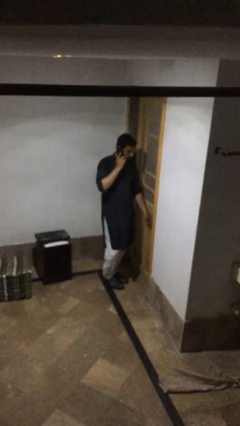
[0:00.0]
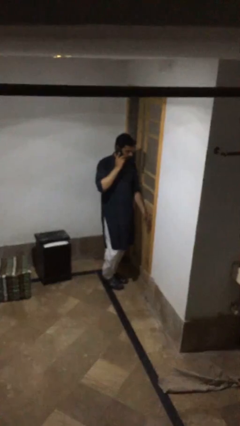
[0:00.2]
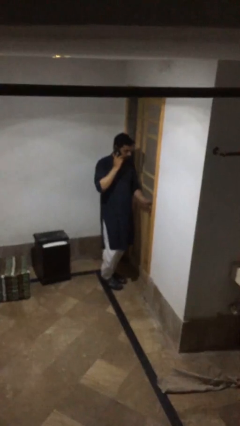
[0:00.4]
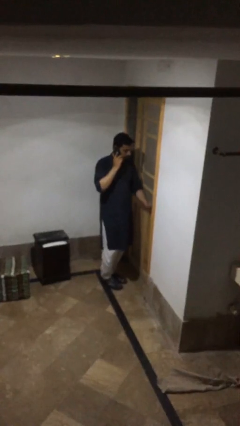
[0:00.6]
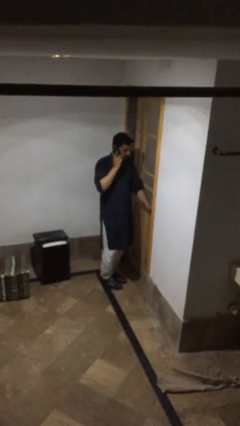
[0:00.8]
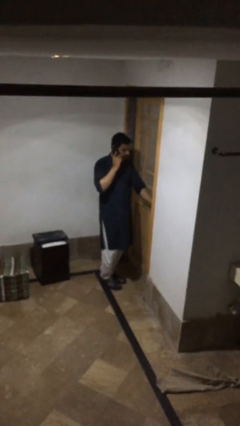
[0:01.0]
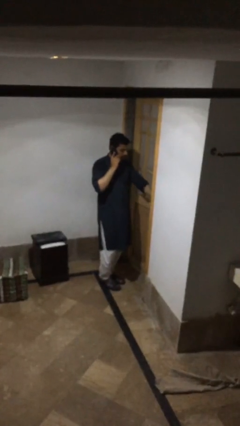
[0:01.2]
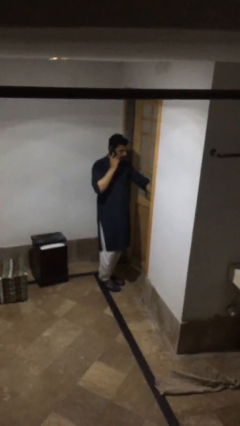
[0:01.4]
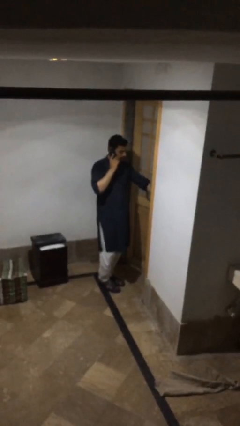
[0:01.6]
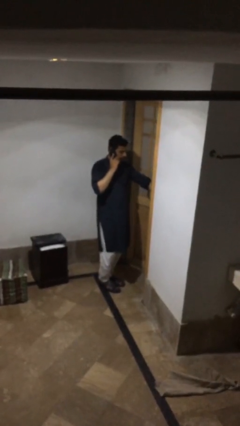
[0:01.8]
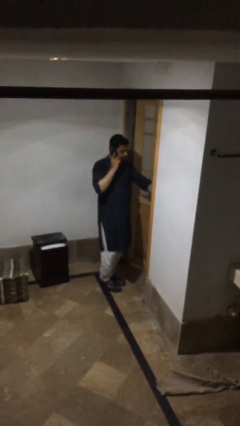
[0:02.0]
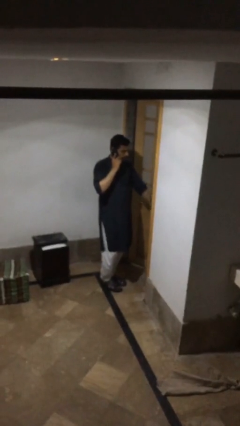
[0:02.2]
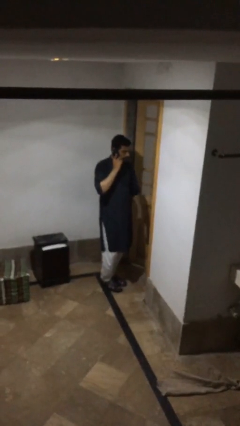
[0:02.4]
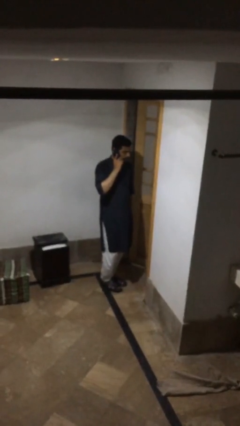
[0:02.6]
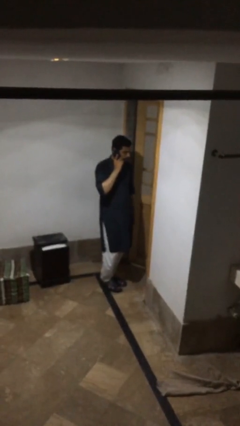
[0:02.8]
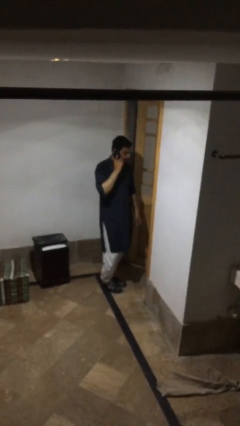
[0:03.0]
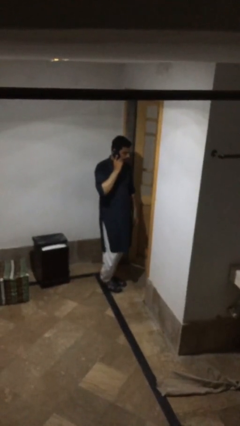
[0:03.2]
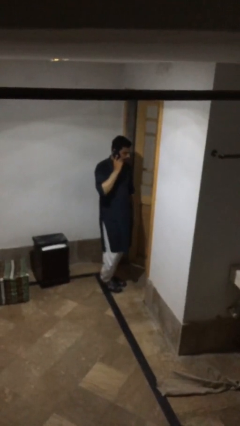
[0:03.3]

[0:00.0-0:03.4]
person opens facility door

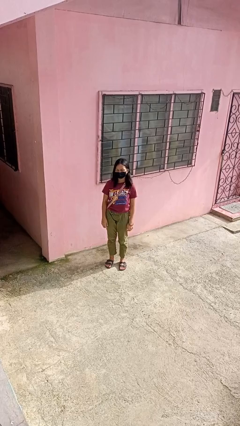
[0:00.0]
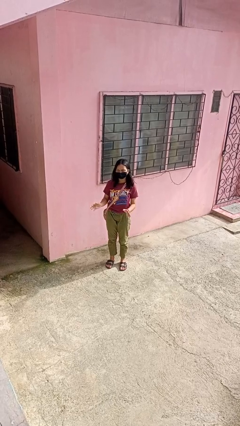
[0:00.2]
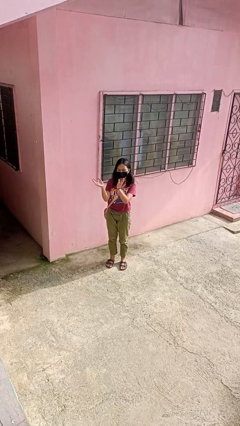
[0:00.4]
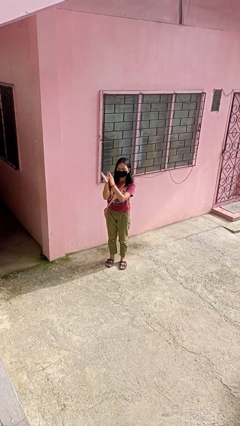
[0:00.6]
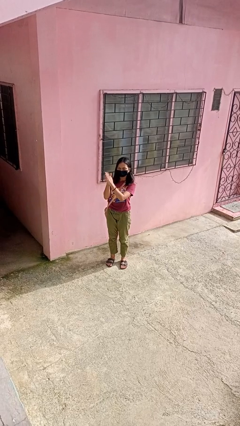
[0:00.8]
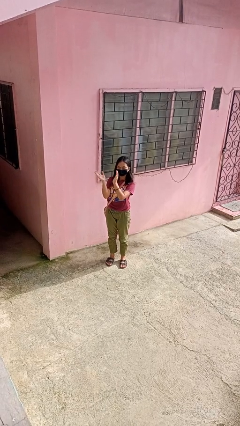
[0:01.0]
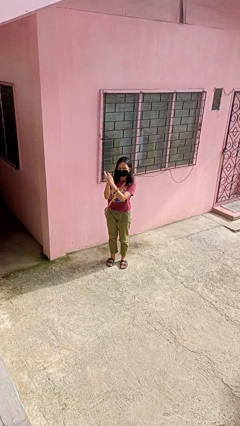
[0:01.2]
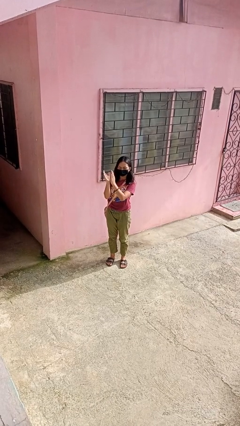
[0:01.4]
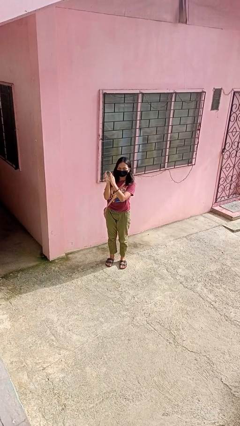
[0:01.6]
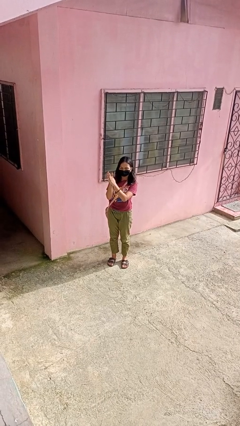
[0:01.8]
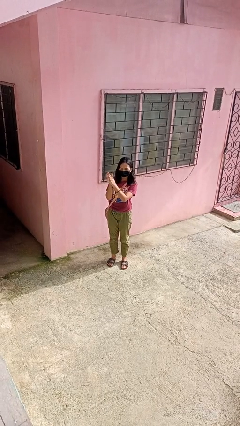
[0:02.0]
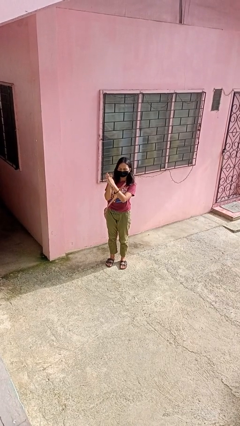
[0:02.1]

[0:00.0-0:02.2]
person claps hands

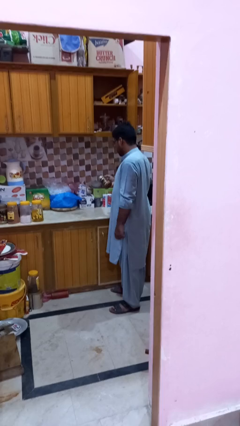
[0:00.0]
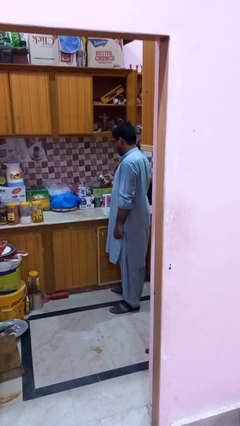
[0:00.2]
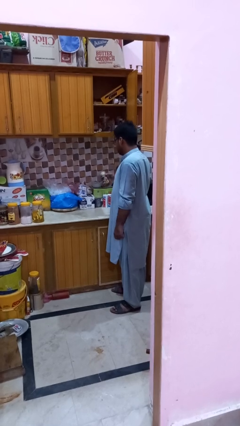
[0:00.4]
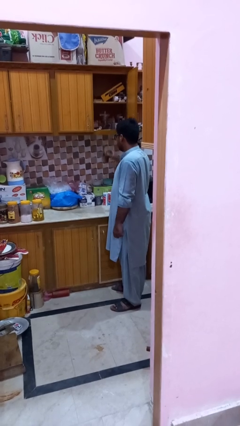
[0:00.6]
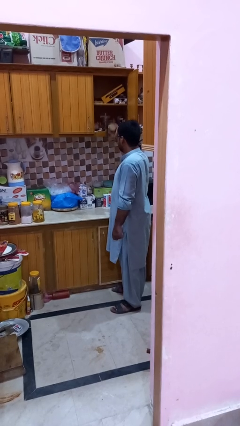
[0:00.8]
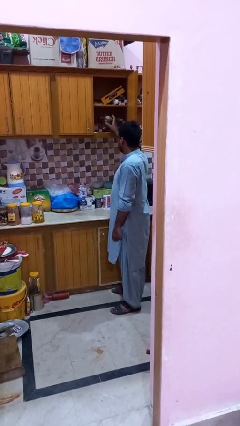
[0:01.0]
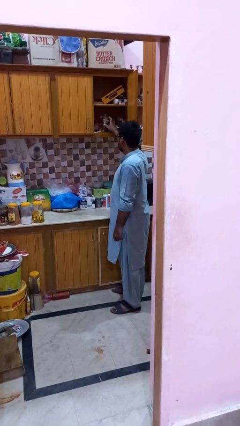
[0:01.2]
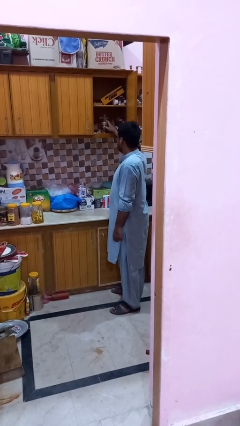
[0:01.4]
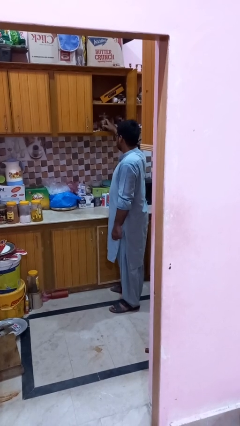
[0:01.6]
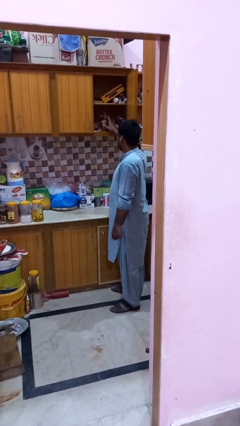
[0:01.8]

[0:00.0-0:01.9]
person puts down object into cabinet

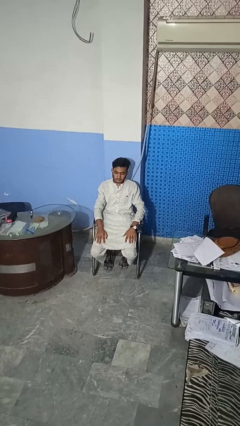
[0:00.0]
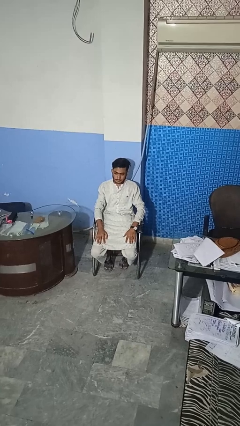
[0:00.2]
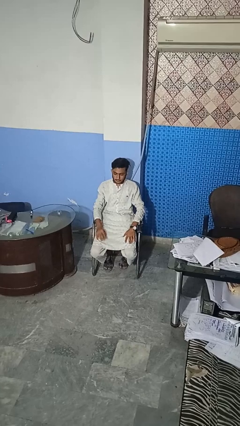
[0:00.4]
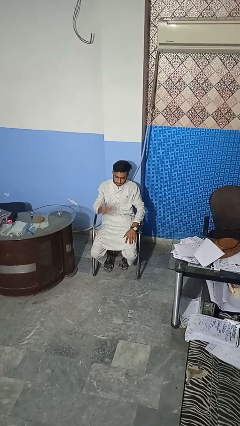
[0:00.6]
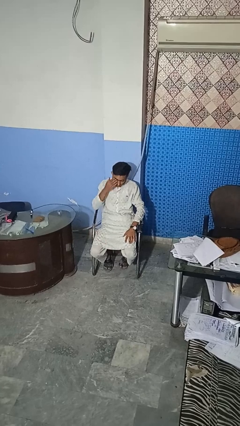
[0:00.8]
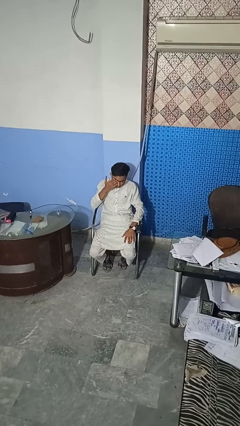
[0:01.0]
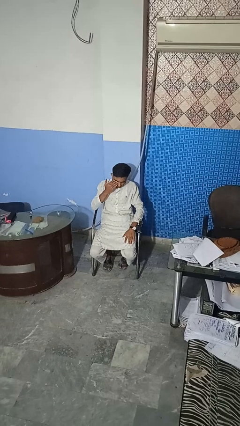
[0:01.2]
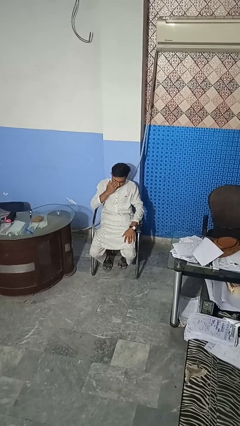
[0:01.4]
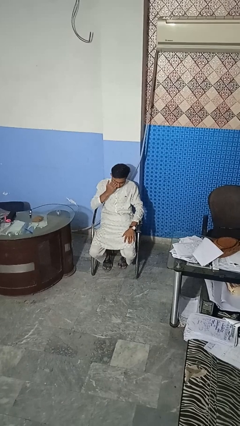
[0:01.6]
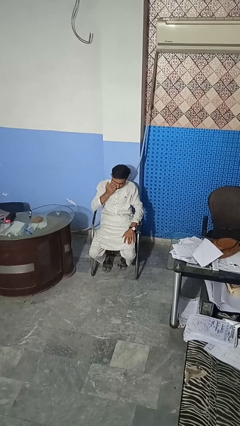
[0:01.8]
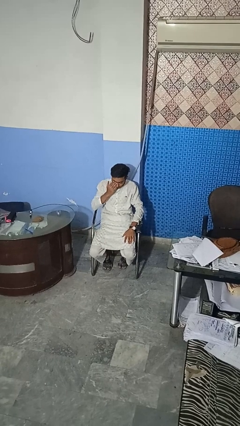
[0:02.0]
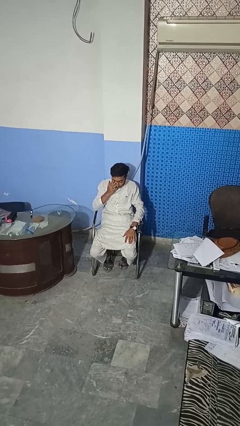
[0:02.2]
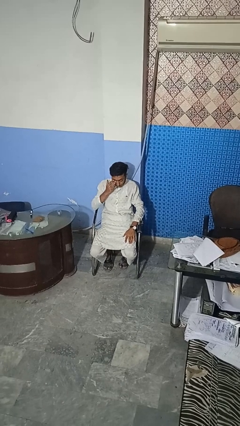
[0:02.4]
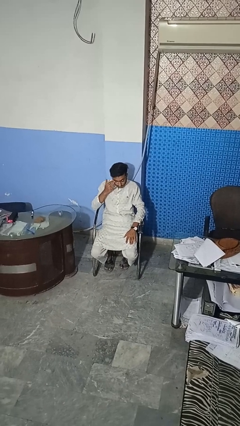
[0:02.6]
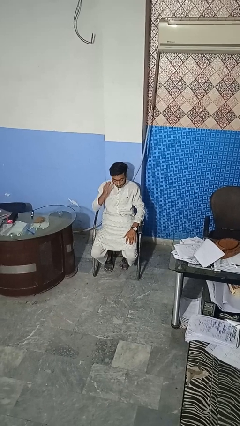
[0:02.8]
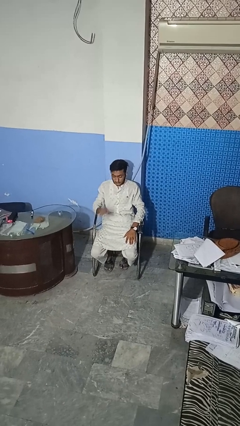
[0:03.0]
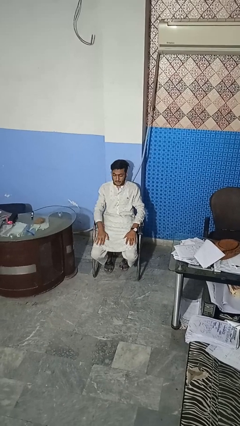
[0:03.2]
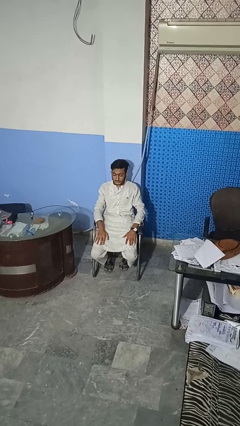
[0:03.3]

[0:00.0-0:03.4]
person rubs eyes

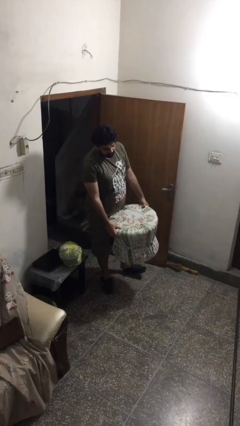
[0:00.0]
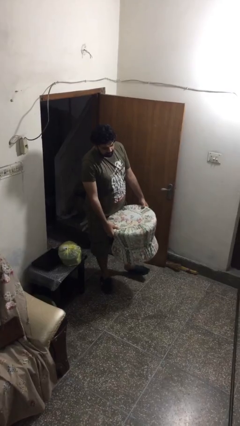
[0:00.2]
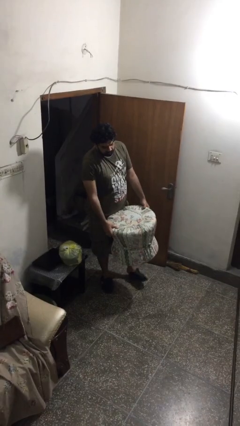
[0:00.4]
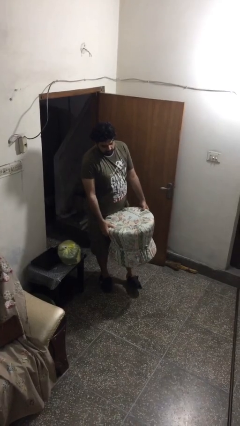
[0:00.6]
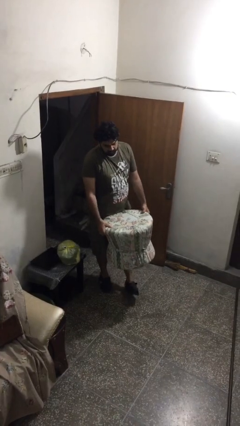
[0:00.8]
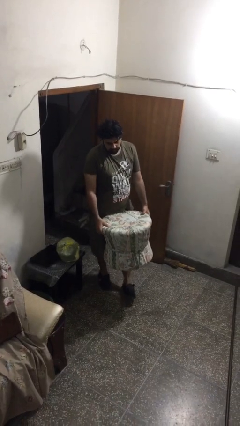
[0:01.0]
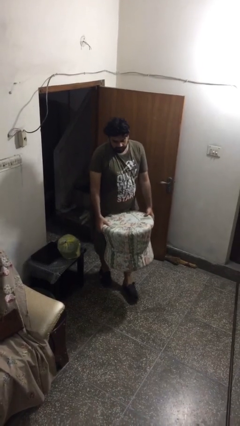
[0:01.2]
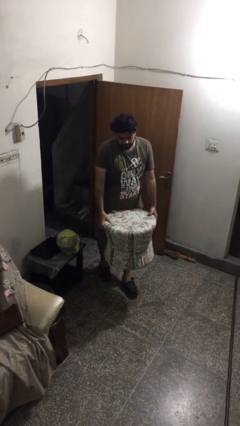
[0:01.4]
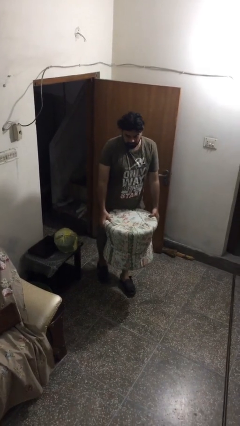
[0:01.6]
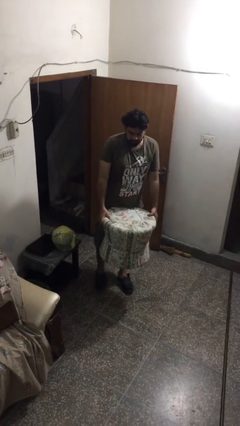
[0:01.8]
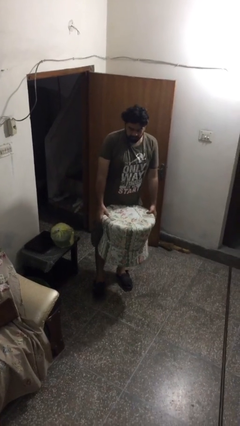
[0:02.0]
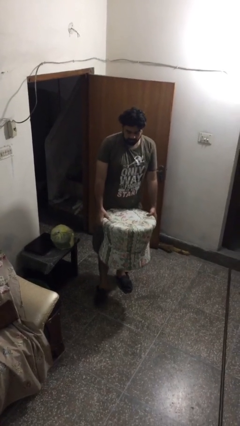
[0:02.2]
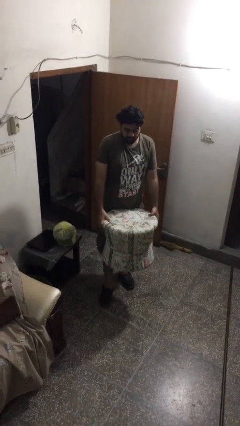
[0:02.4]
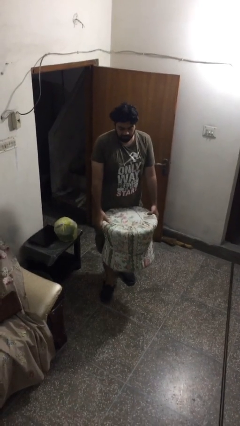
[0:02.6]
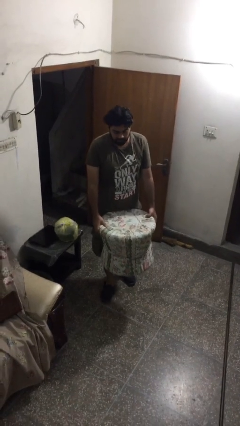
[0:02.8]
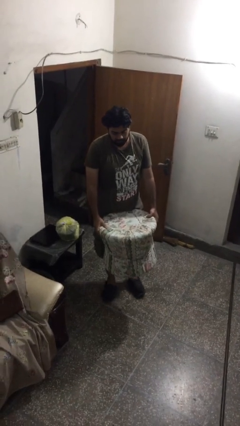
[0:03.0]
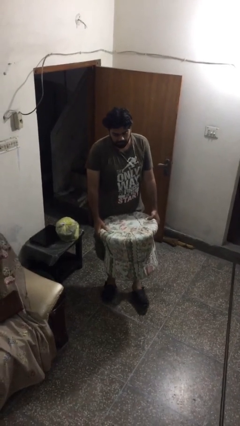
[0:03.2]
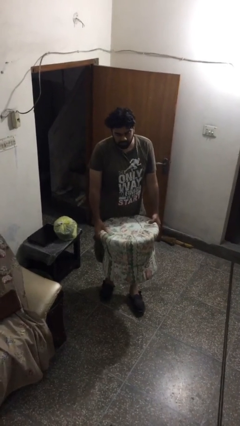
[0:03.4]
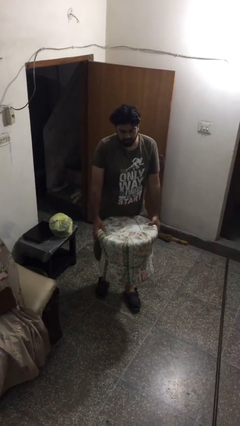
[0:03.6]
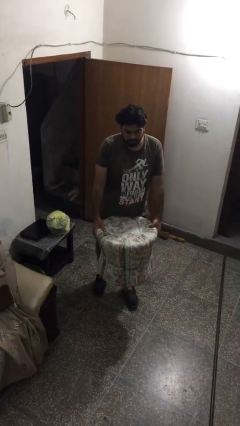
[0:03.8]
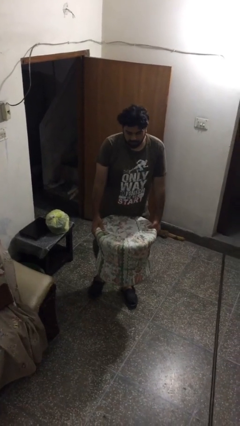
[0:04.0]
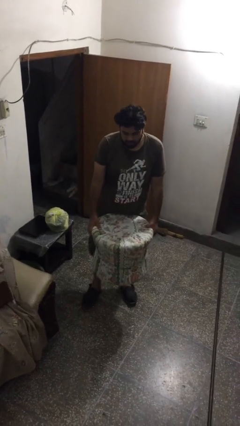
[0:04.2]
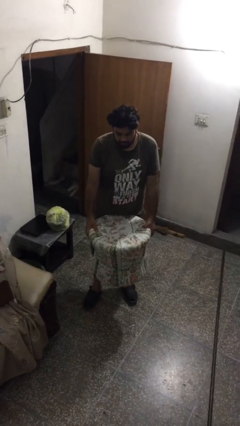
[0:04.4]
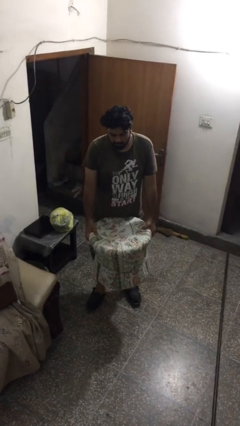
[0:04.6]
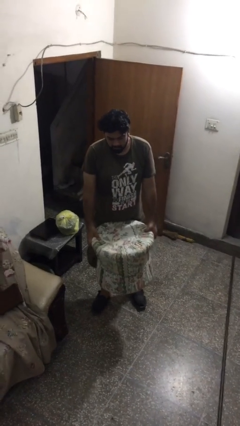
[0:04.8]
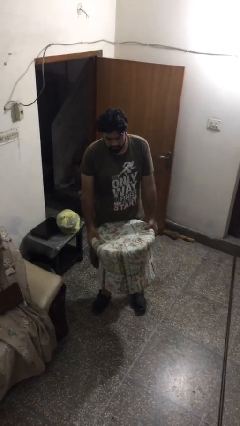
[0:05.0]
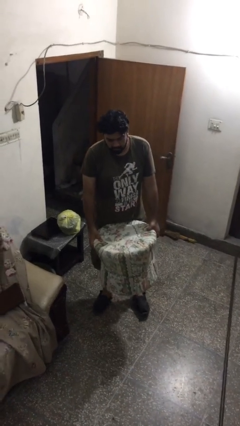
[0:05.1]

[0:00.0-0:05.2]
person carries heavy object

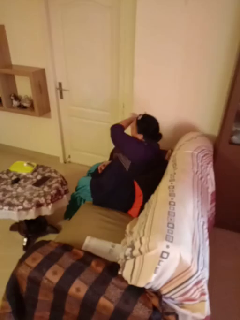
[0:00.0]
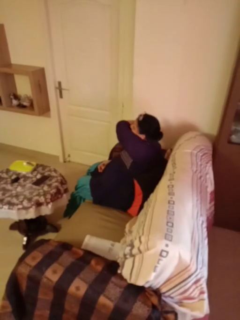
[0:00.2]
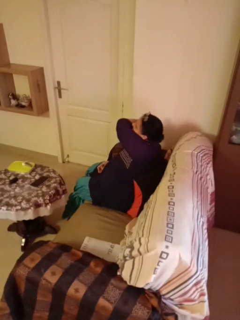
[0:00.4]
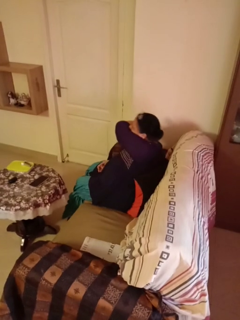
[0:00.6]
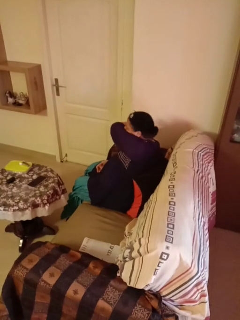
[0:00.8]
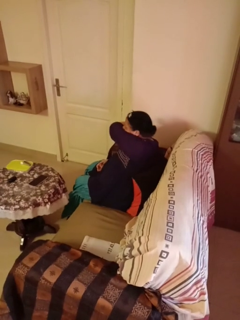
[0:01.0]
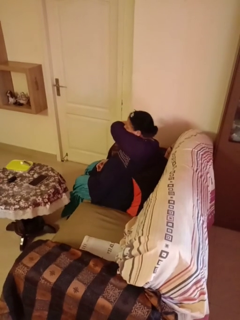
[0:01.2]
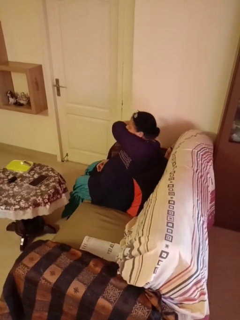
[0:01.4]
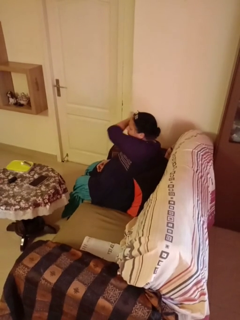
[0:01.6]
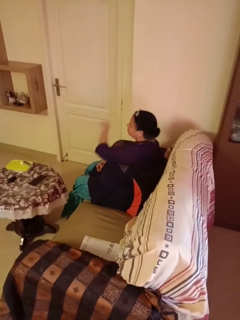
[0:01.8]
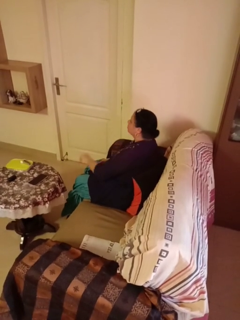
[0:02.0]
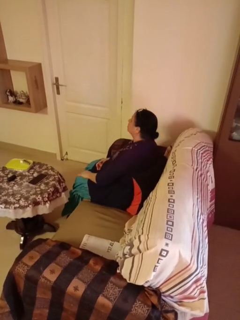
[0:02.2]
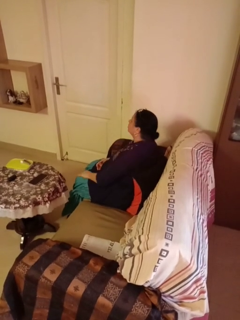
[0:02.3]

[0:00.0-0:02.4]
person sneezes into arm
